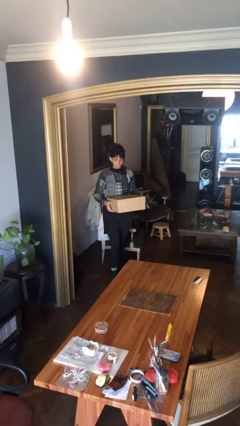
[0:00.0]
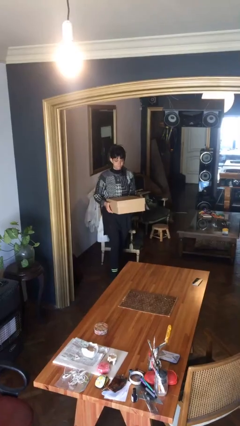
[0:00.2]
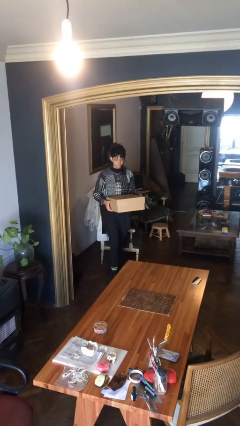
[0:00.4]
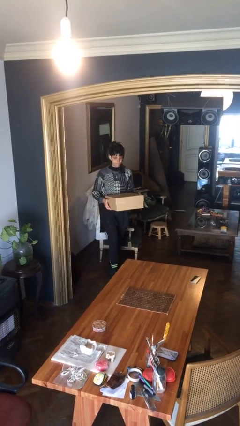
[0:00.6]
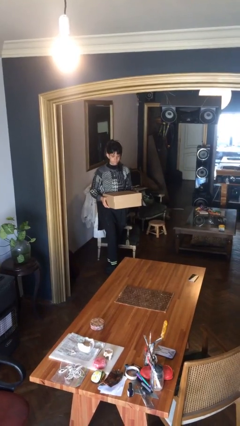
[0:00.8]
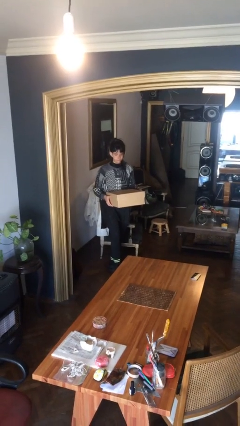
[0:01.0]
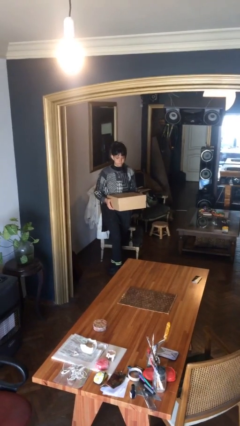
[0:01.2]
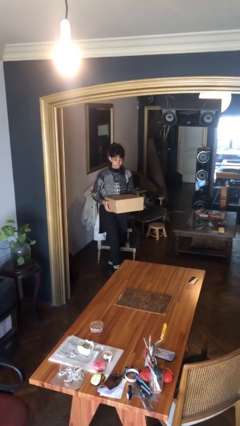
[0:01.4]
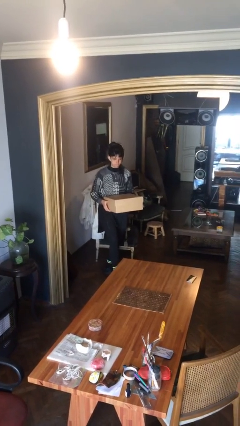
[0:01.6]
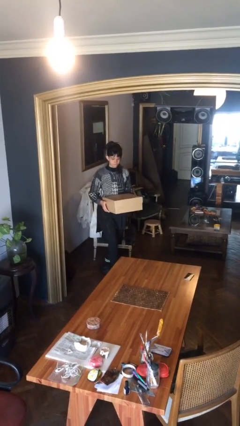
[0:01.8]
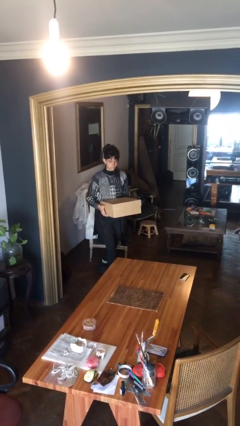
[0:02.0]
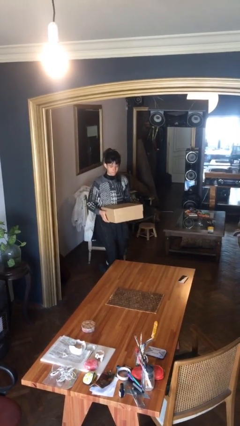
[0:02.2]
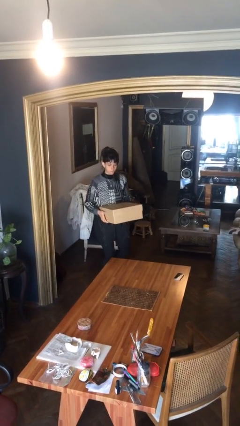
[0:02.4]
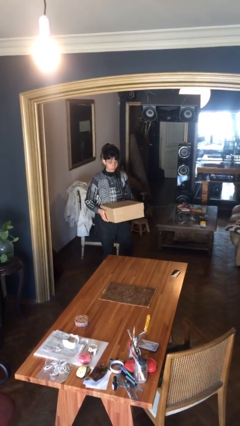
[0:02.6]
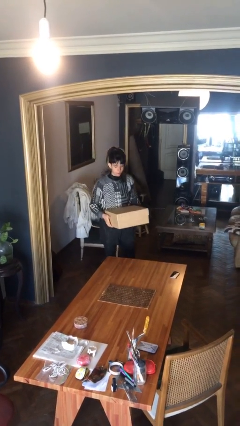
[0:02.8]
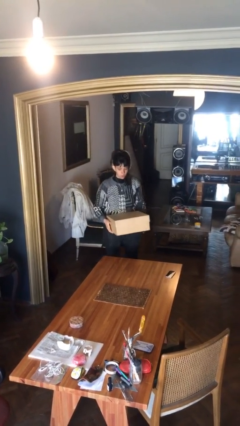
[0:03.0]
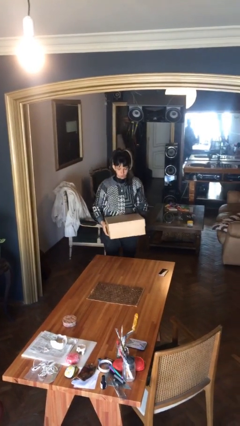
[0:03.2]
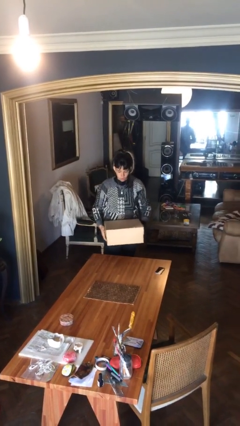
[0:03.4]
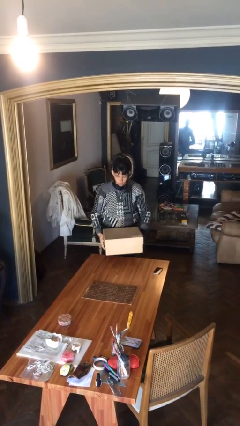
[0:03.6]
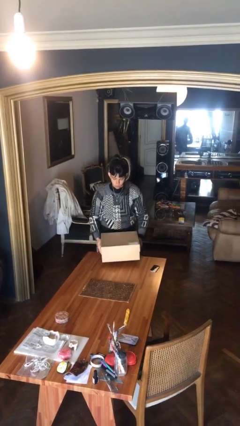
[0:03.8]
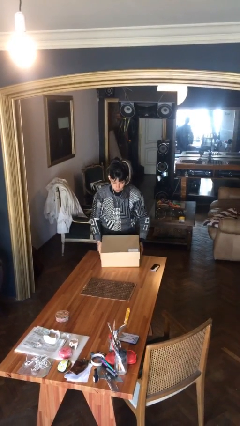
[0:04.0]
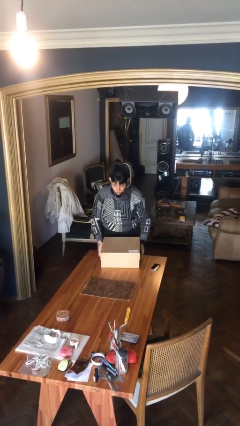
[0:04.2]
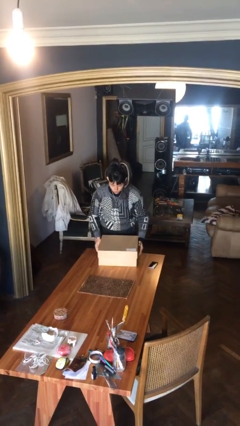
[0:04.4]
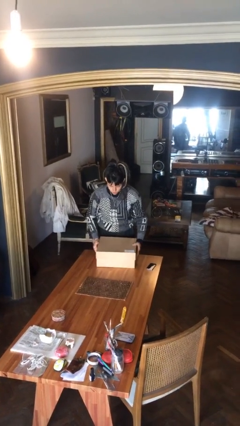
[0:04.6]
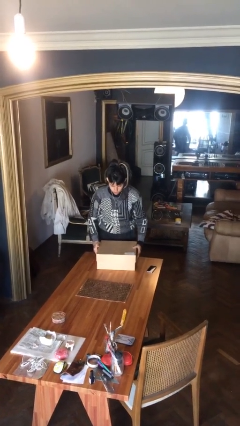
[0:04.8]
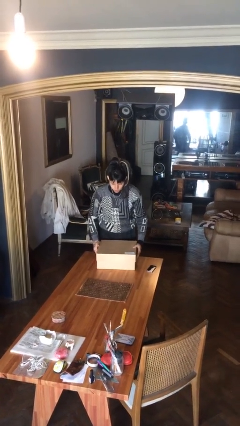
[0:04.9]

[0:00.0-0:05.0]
person puts down object on table

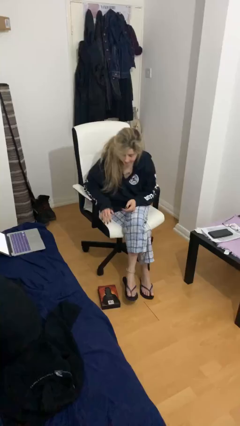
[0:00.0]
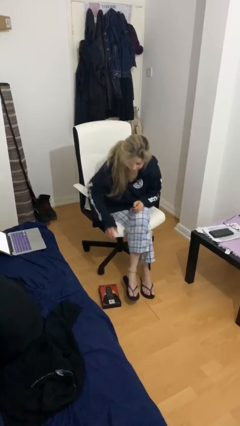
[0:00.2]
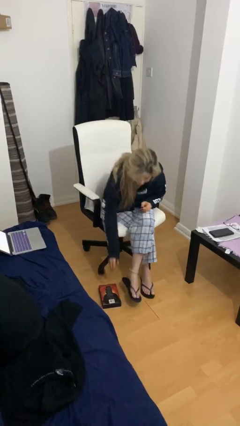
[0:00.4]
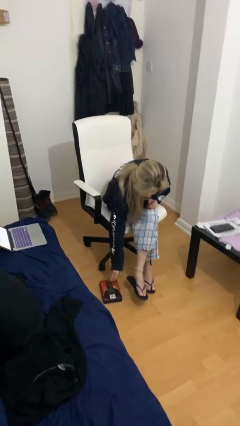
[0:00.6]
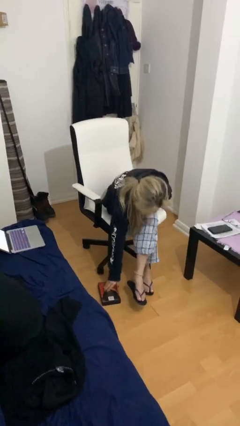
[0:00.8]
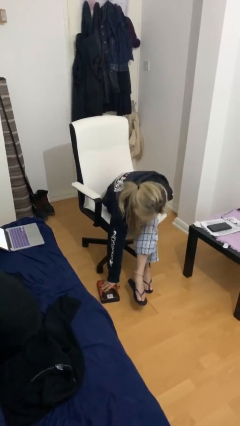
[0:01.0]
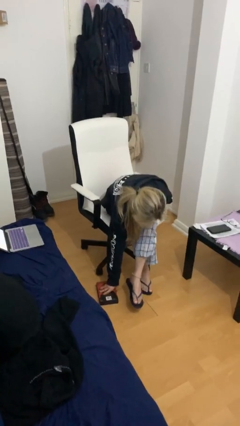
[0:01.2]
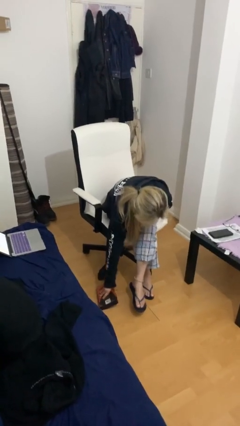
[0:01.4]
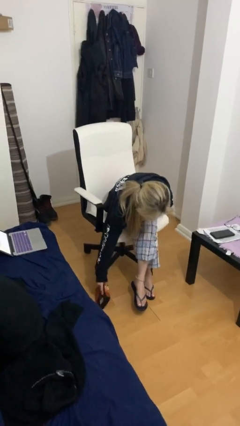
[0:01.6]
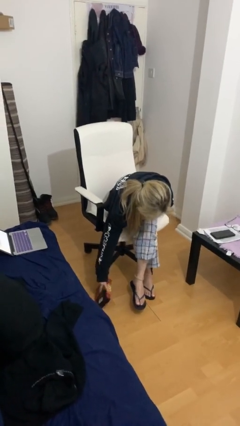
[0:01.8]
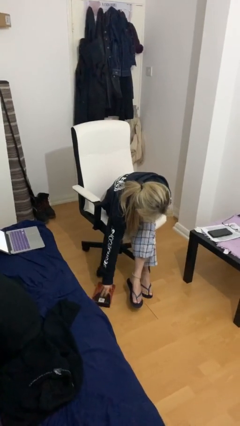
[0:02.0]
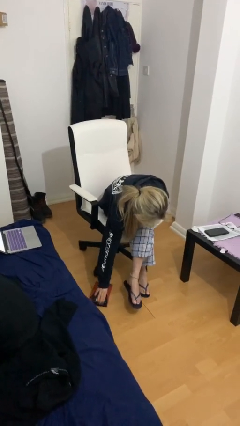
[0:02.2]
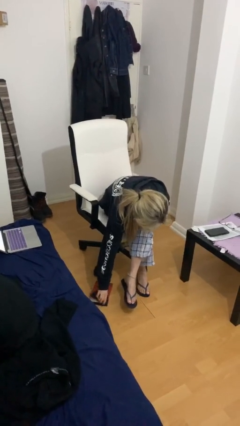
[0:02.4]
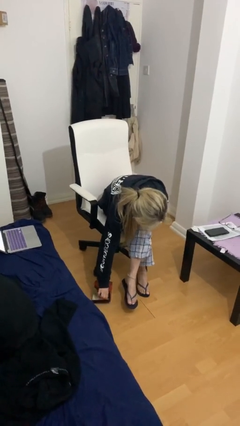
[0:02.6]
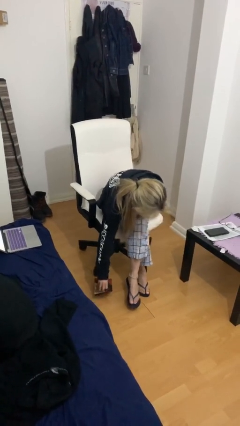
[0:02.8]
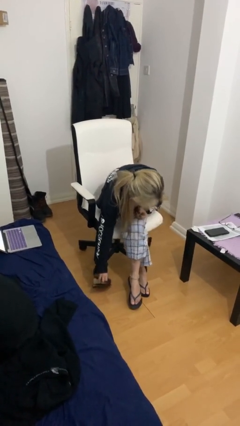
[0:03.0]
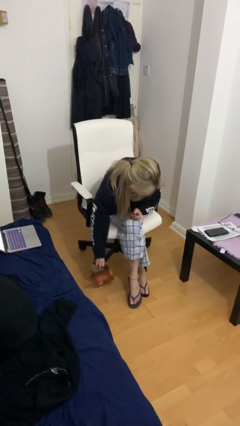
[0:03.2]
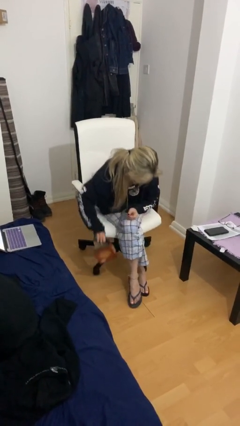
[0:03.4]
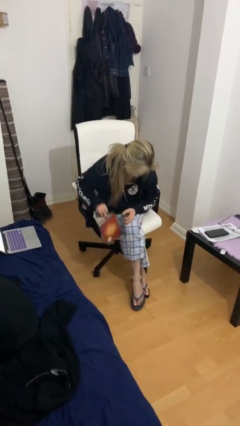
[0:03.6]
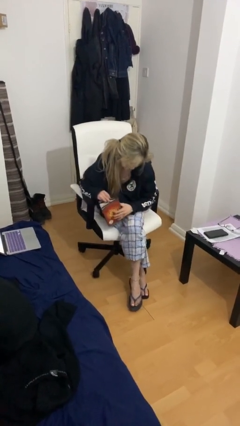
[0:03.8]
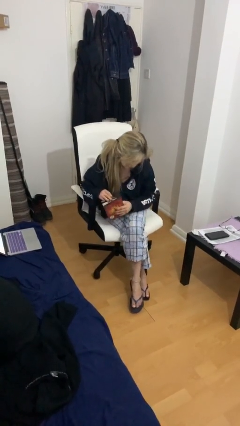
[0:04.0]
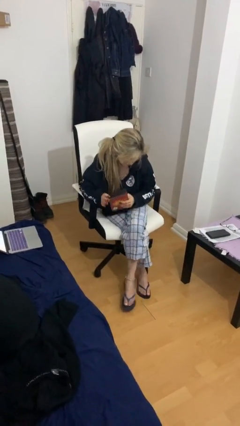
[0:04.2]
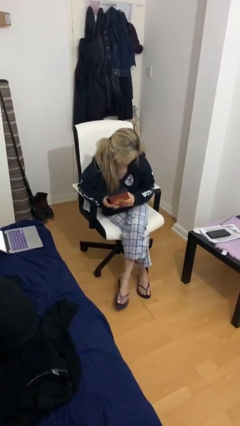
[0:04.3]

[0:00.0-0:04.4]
person picks up object from floor

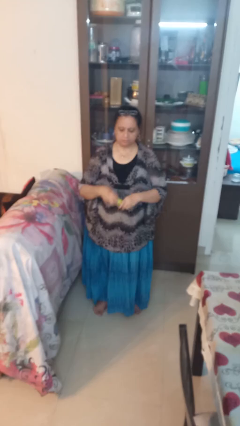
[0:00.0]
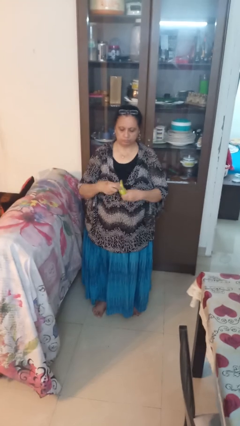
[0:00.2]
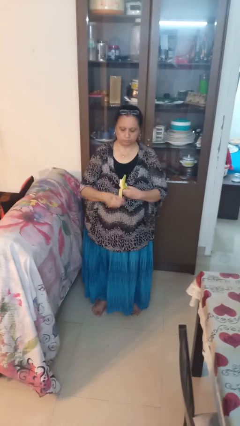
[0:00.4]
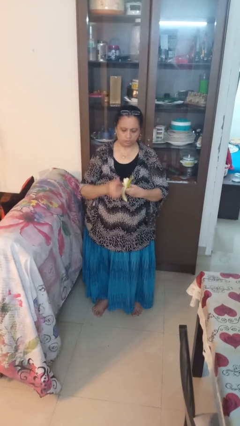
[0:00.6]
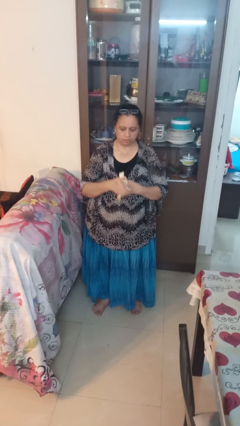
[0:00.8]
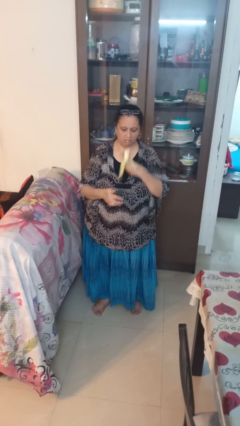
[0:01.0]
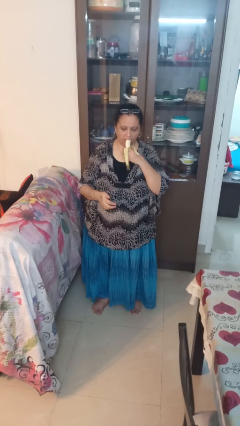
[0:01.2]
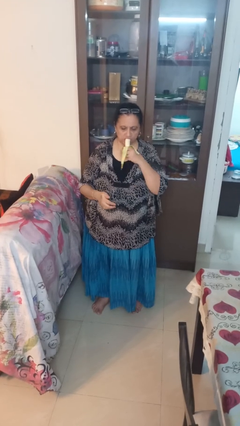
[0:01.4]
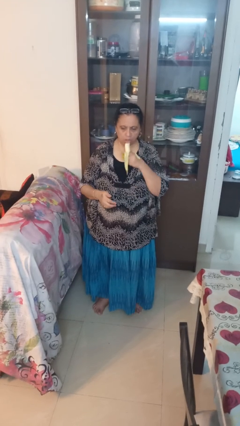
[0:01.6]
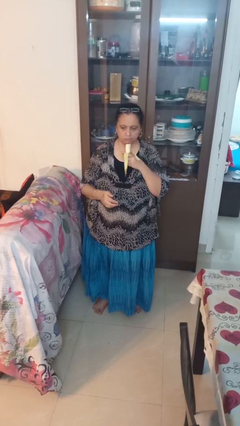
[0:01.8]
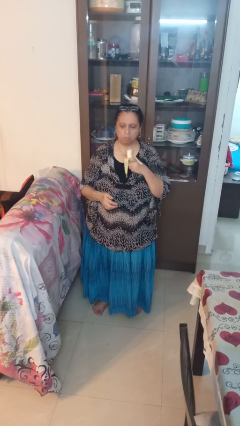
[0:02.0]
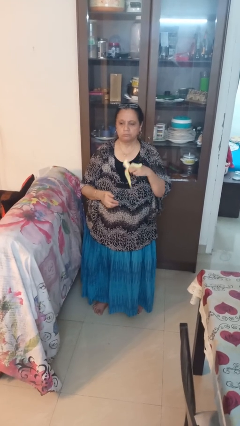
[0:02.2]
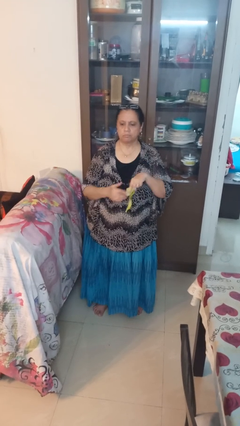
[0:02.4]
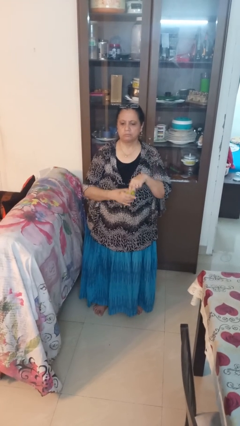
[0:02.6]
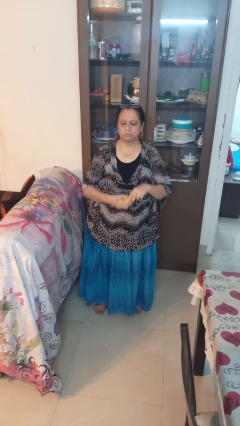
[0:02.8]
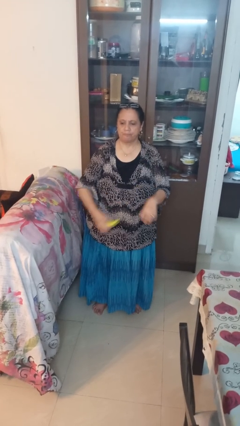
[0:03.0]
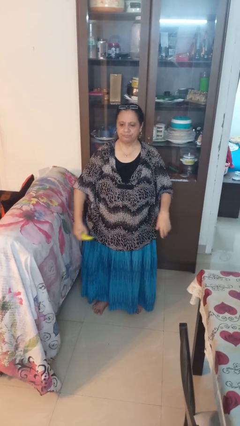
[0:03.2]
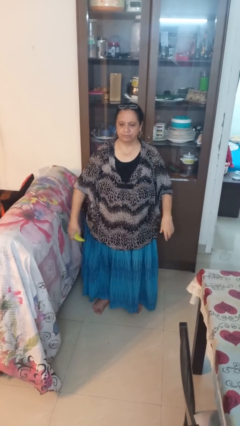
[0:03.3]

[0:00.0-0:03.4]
person eats banana

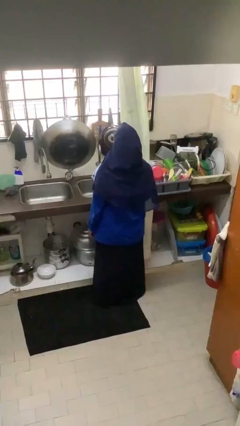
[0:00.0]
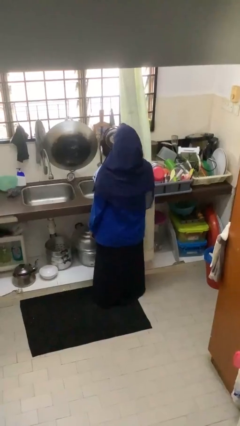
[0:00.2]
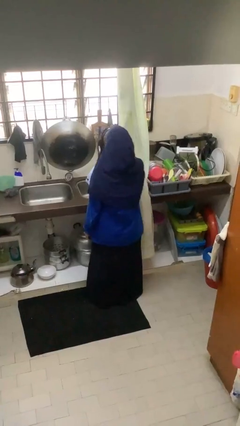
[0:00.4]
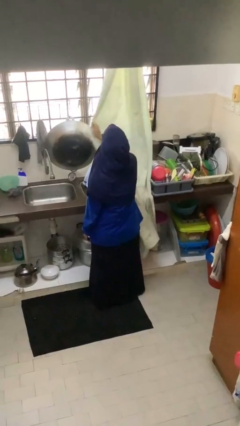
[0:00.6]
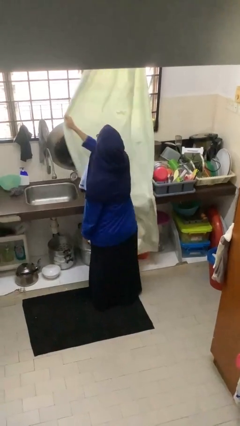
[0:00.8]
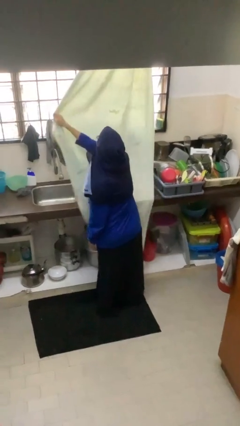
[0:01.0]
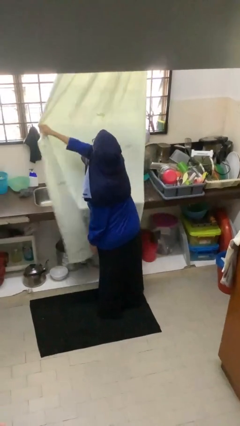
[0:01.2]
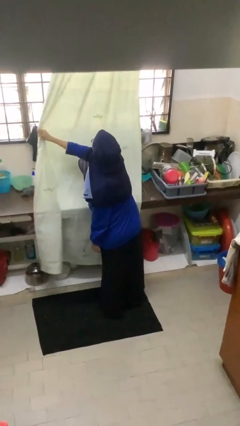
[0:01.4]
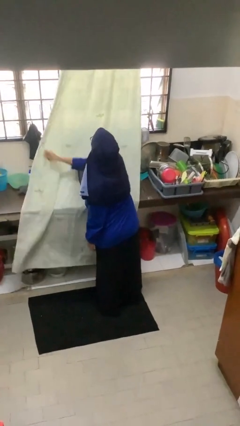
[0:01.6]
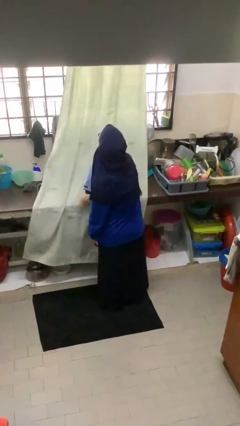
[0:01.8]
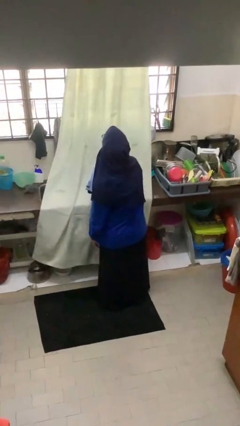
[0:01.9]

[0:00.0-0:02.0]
person closes curtains

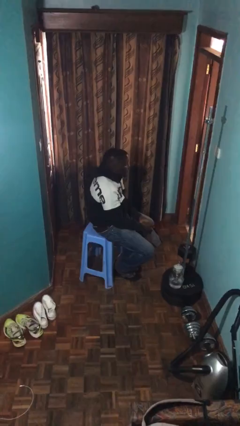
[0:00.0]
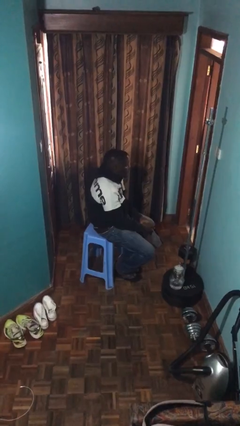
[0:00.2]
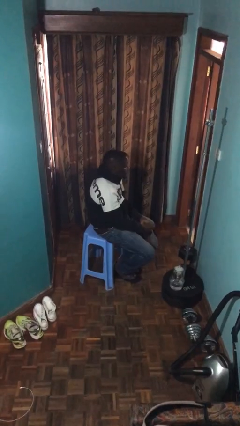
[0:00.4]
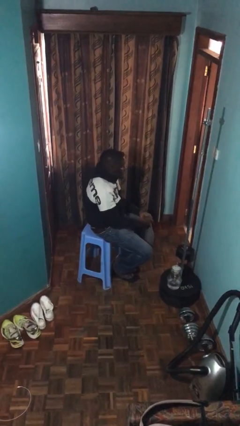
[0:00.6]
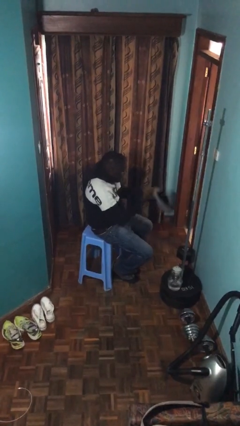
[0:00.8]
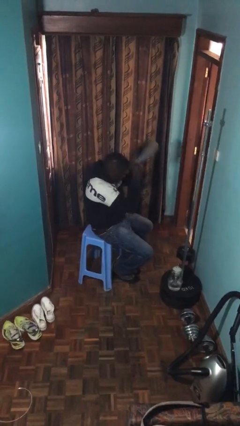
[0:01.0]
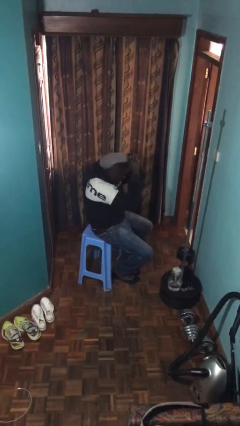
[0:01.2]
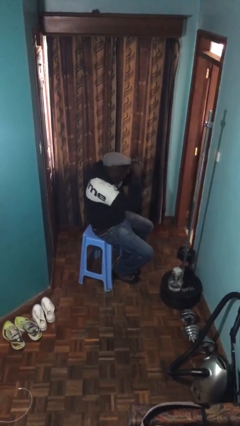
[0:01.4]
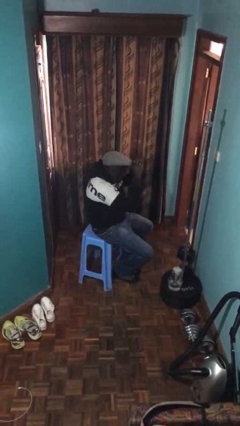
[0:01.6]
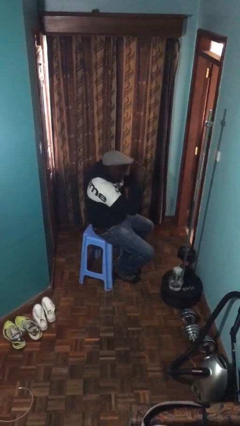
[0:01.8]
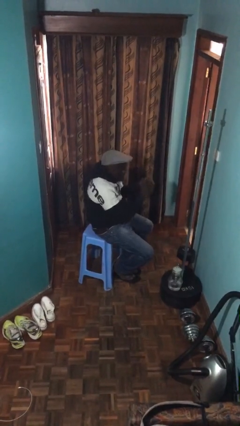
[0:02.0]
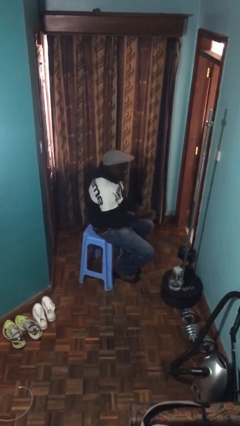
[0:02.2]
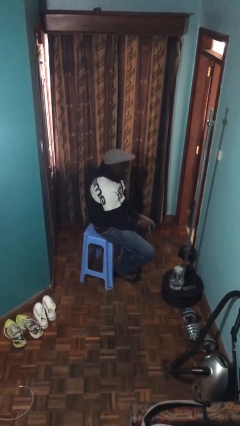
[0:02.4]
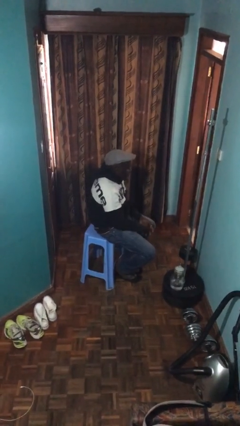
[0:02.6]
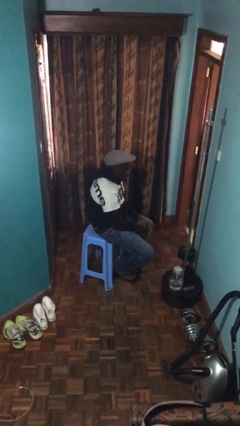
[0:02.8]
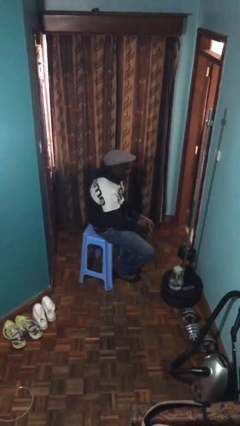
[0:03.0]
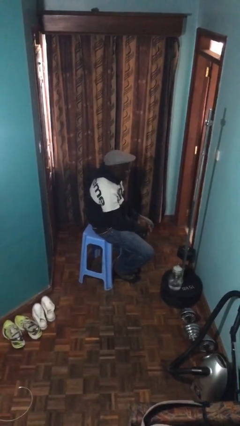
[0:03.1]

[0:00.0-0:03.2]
person puts on hat
